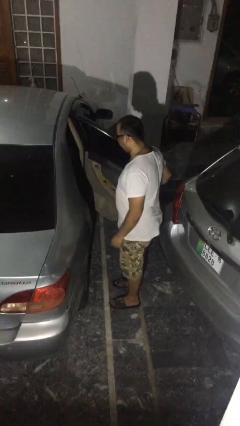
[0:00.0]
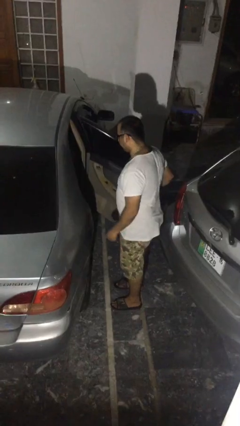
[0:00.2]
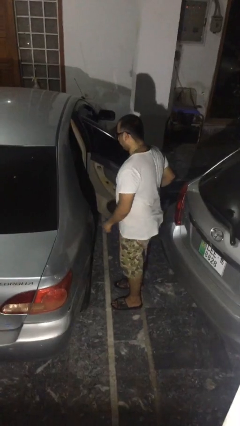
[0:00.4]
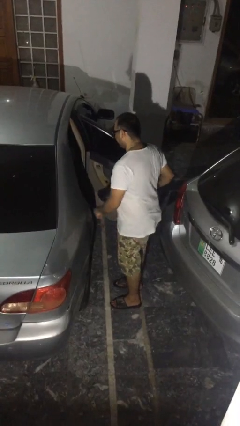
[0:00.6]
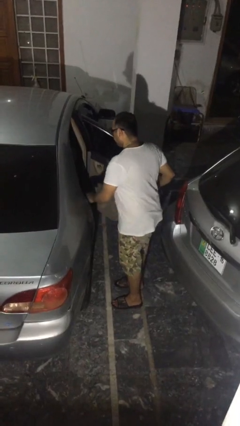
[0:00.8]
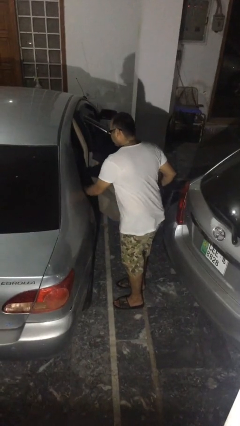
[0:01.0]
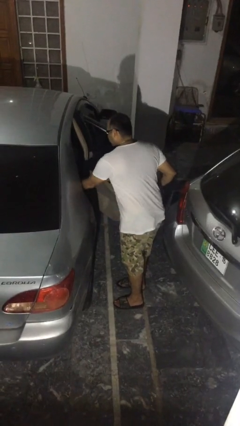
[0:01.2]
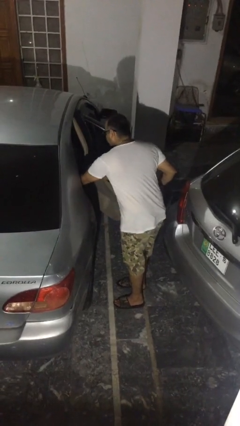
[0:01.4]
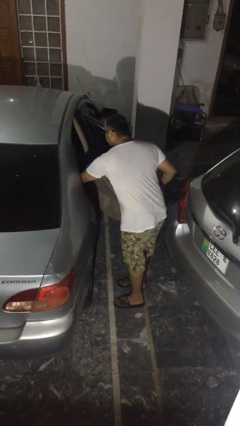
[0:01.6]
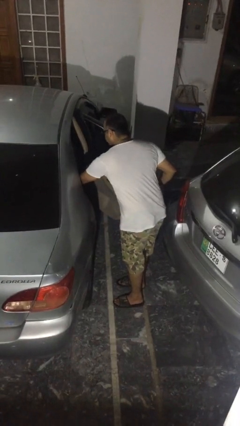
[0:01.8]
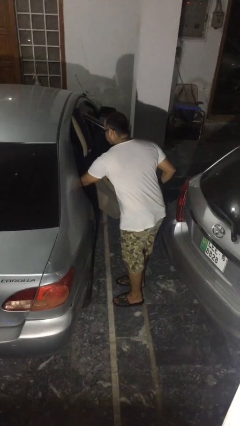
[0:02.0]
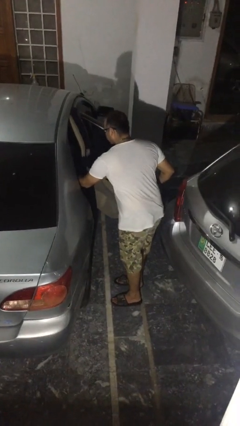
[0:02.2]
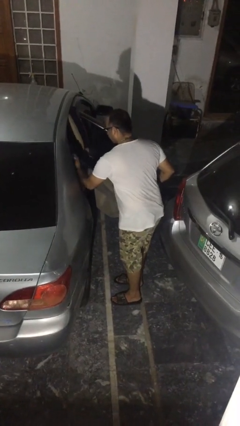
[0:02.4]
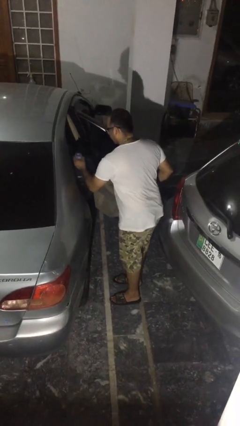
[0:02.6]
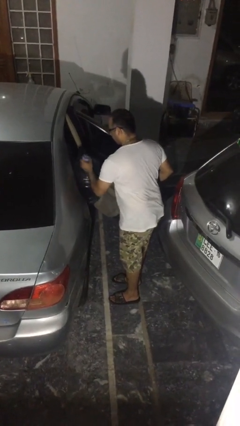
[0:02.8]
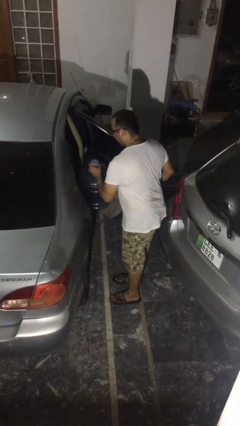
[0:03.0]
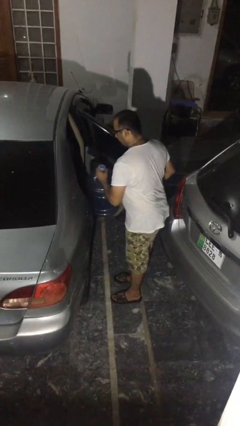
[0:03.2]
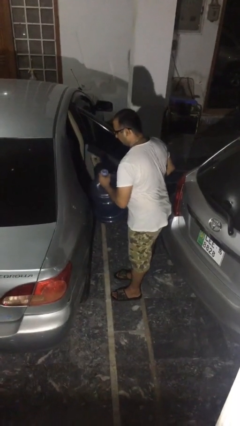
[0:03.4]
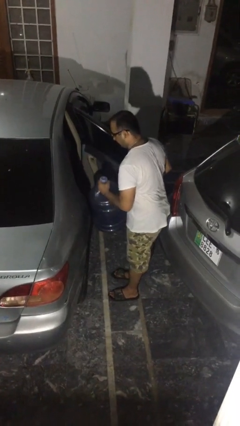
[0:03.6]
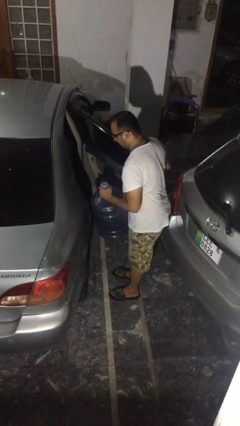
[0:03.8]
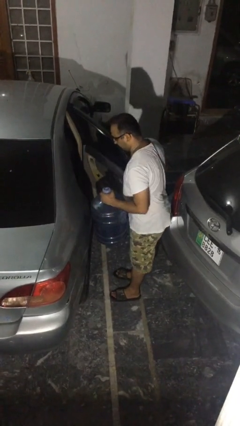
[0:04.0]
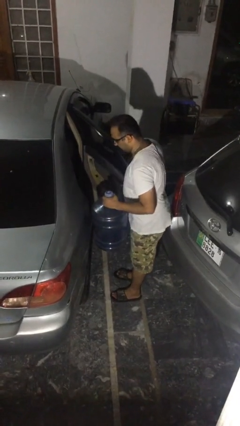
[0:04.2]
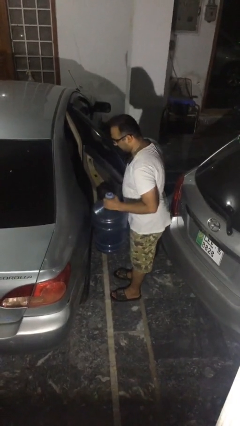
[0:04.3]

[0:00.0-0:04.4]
person unloads car

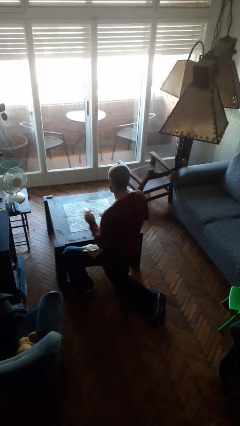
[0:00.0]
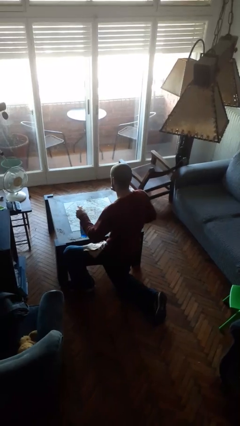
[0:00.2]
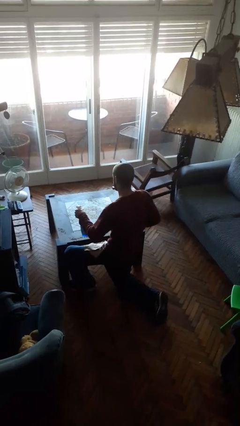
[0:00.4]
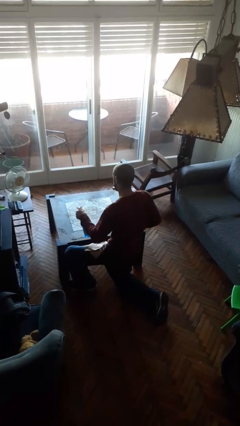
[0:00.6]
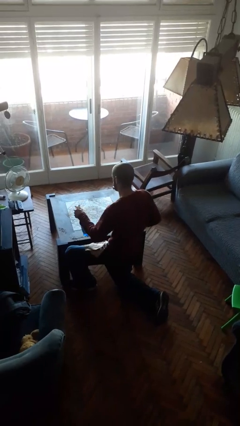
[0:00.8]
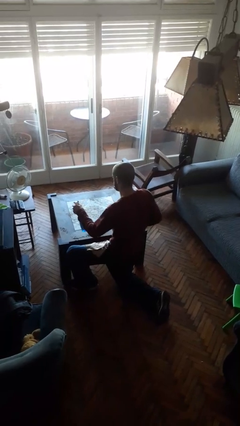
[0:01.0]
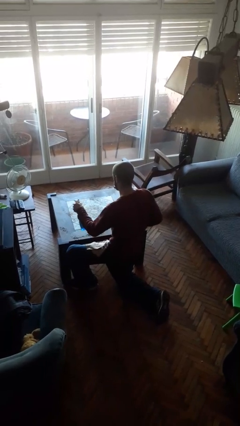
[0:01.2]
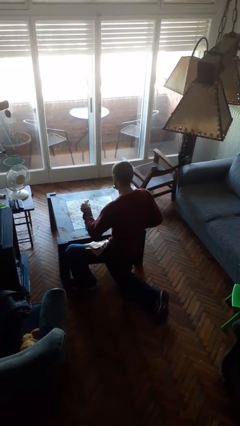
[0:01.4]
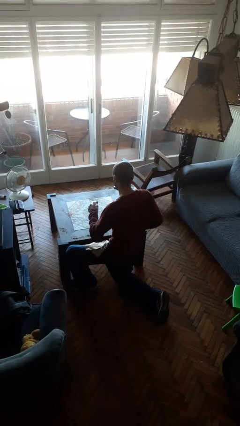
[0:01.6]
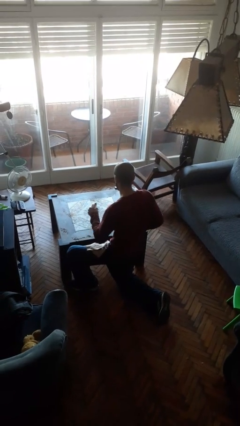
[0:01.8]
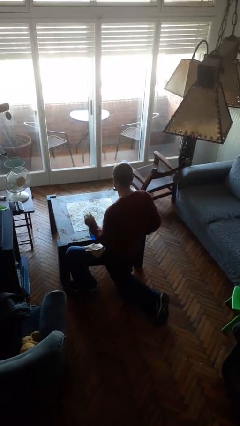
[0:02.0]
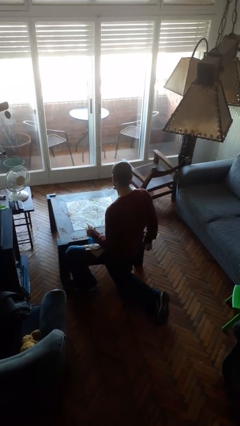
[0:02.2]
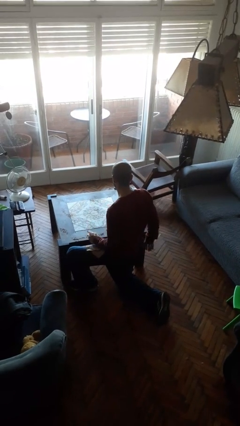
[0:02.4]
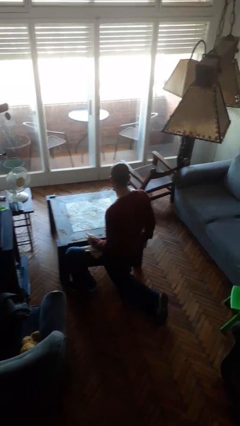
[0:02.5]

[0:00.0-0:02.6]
person sprays from bottle

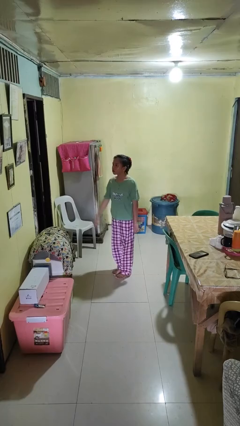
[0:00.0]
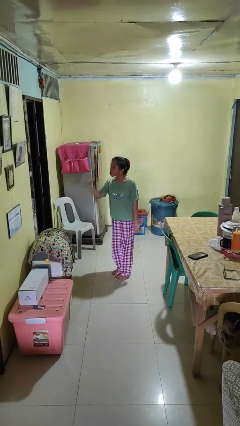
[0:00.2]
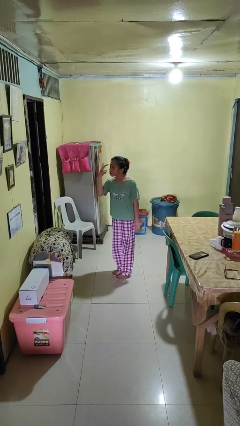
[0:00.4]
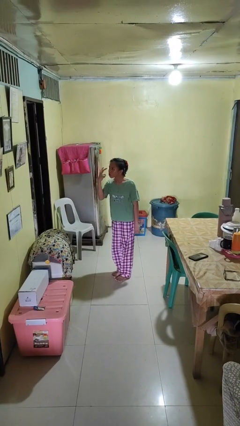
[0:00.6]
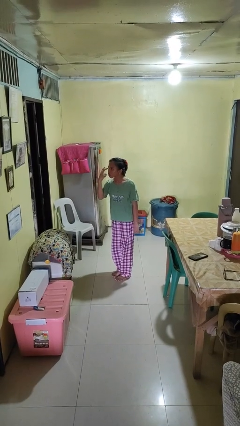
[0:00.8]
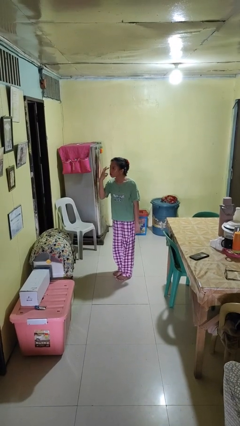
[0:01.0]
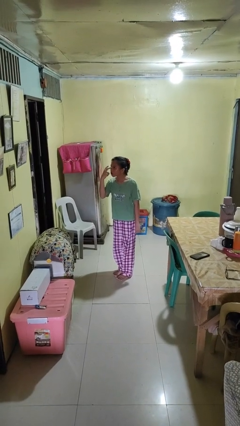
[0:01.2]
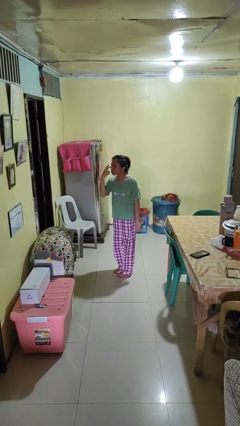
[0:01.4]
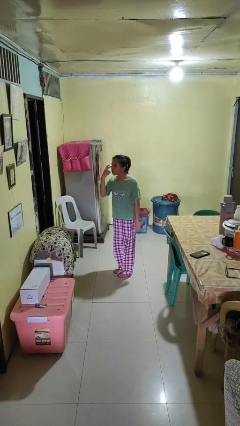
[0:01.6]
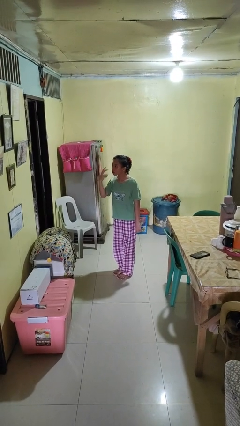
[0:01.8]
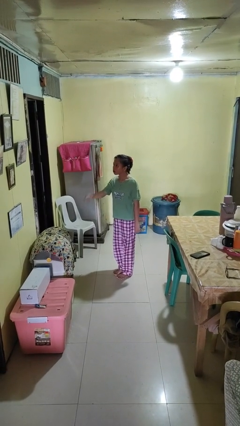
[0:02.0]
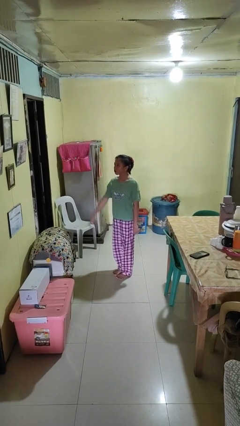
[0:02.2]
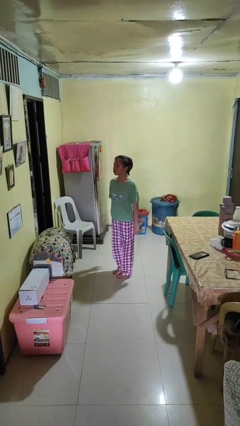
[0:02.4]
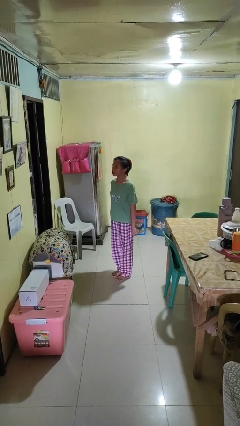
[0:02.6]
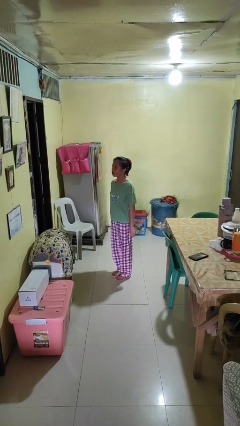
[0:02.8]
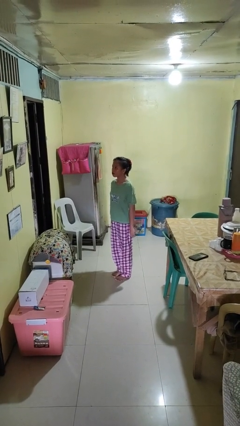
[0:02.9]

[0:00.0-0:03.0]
person gestures watch closely

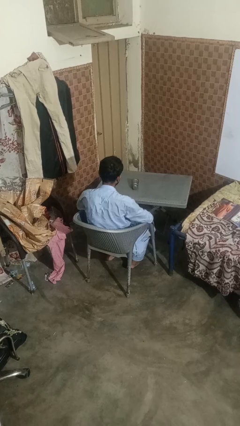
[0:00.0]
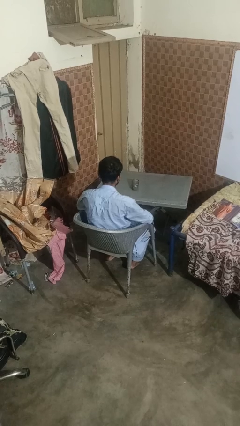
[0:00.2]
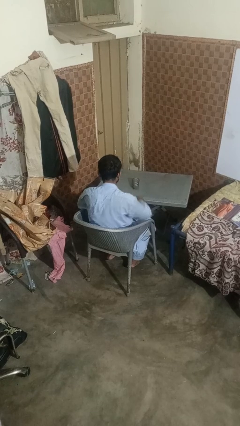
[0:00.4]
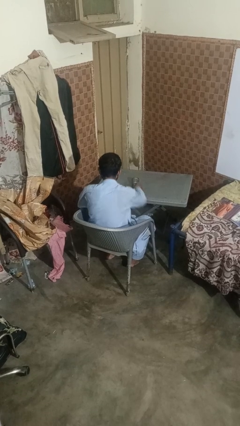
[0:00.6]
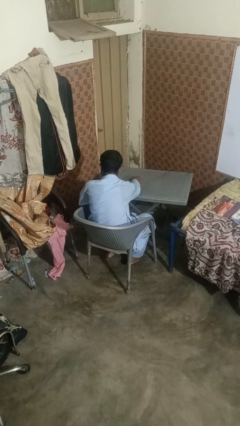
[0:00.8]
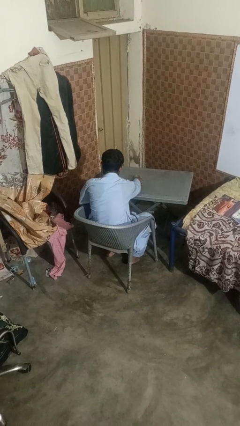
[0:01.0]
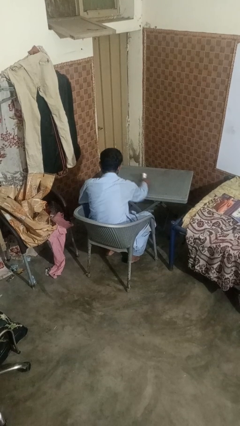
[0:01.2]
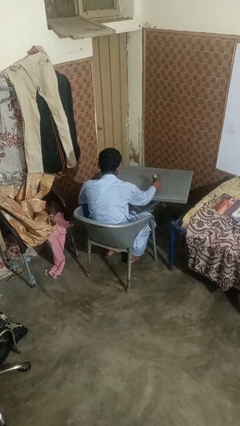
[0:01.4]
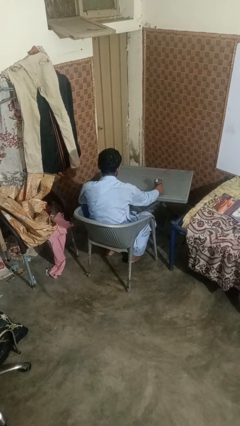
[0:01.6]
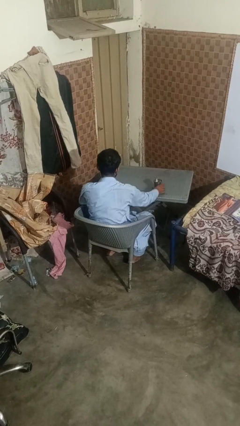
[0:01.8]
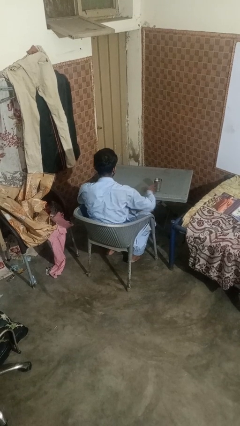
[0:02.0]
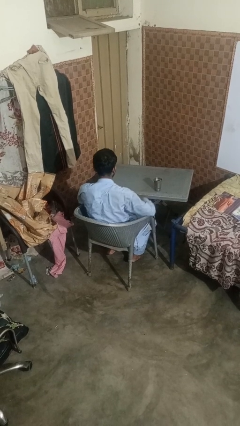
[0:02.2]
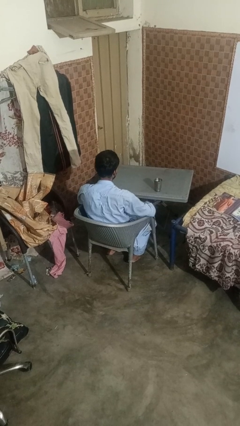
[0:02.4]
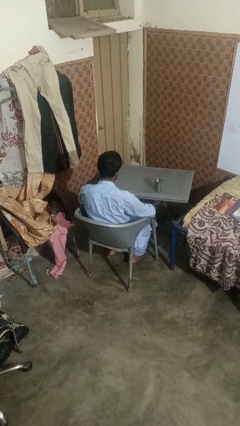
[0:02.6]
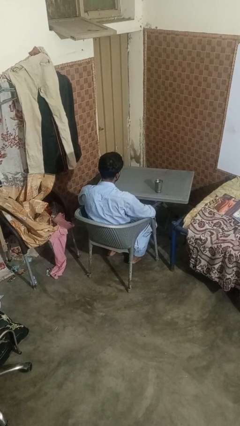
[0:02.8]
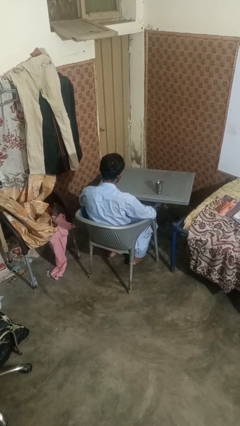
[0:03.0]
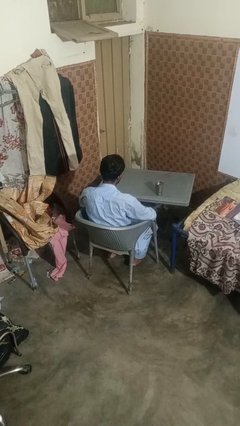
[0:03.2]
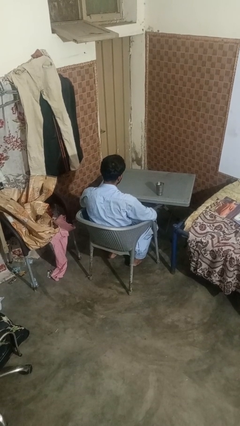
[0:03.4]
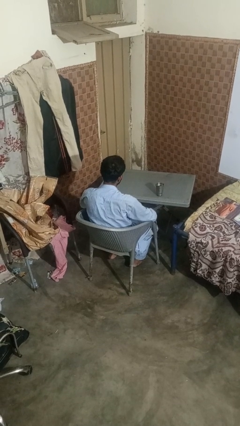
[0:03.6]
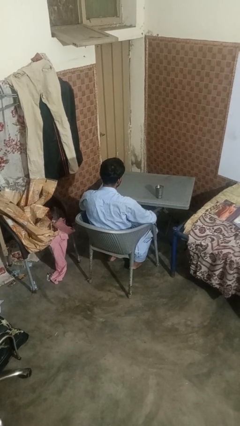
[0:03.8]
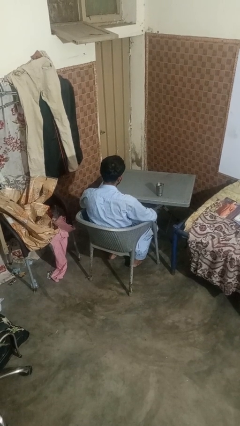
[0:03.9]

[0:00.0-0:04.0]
person sets upright glass

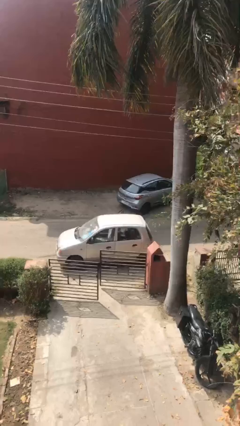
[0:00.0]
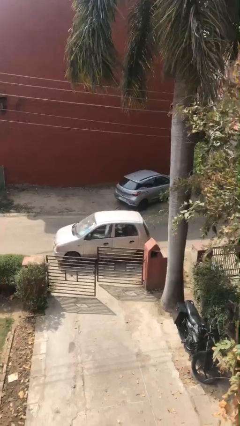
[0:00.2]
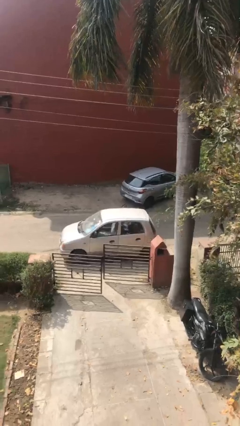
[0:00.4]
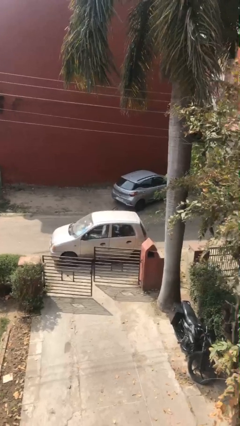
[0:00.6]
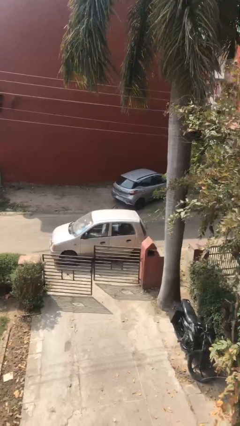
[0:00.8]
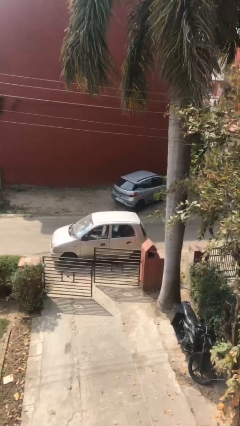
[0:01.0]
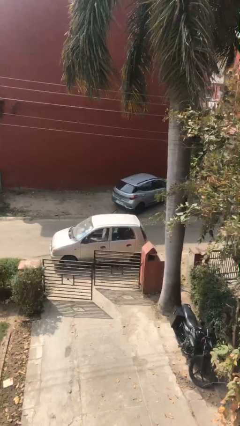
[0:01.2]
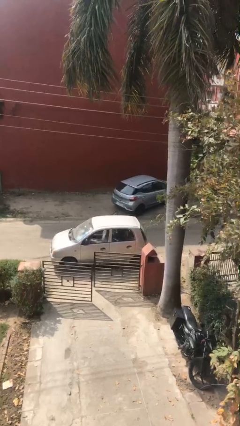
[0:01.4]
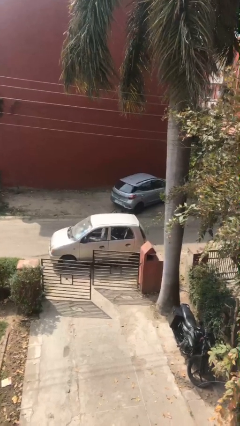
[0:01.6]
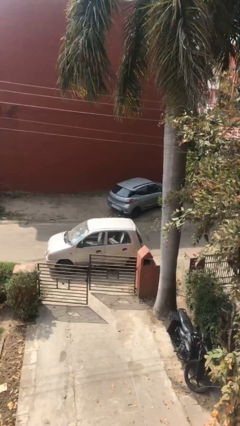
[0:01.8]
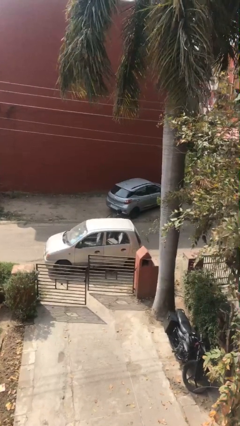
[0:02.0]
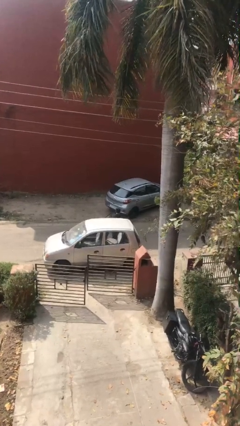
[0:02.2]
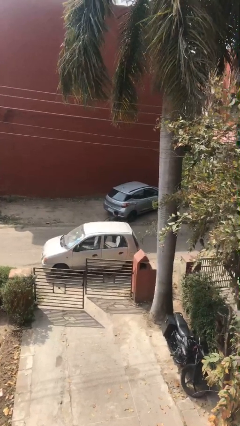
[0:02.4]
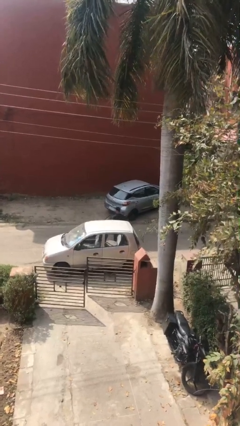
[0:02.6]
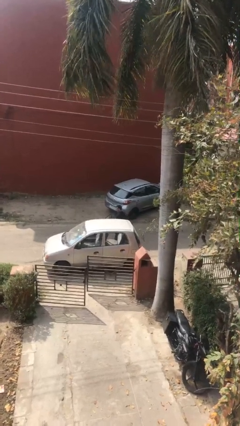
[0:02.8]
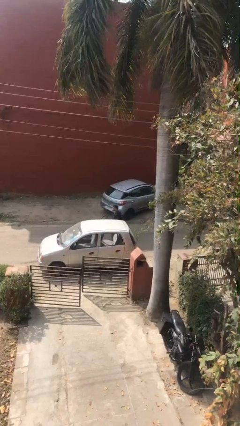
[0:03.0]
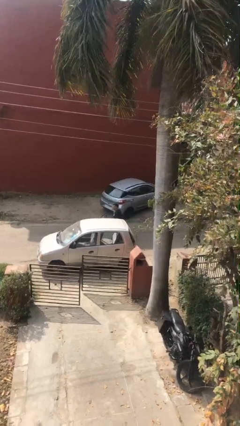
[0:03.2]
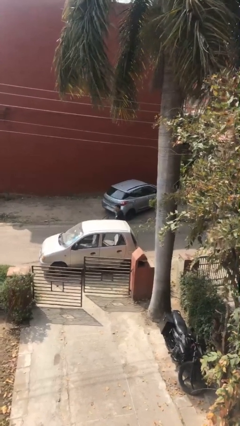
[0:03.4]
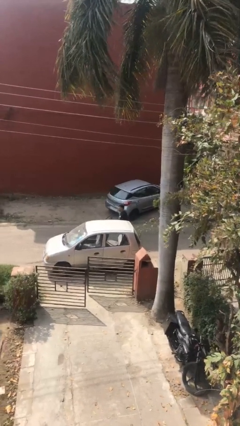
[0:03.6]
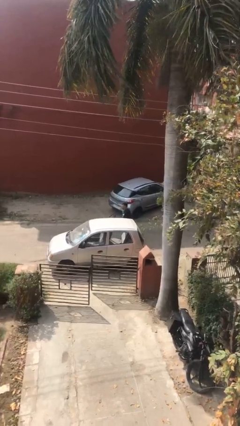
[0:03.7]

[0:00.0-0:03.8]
person exits car
